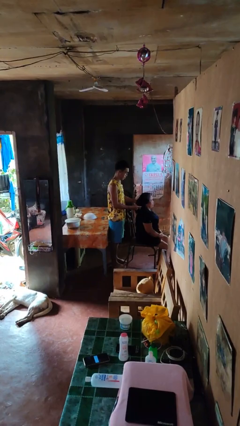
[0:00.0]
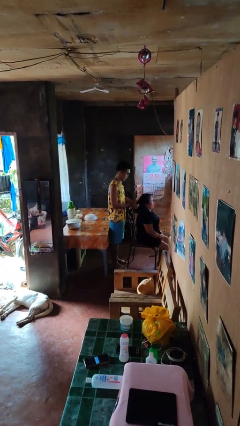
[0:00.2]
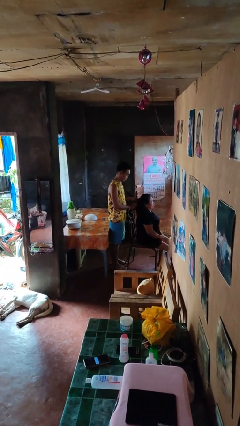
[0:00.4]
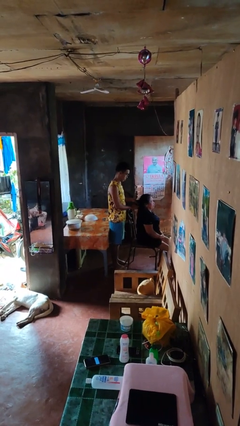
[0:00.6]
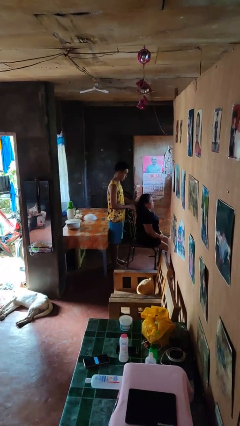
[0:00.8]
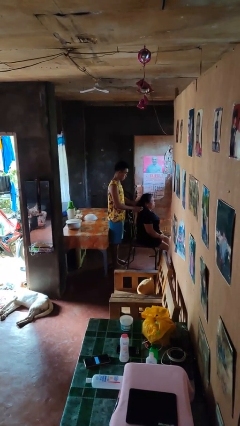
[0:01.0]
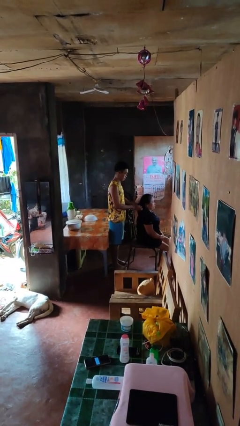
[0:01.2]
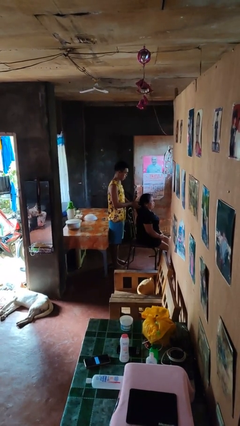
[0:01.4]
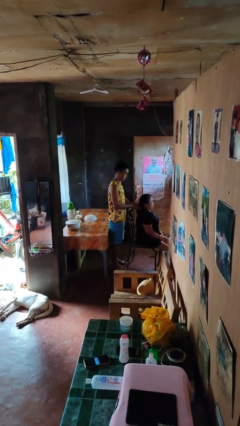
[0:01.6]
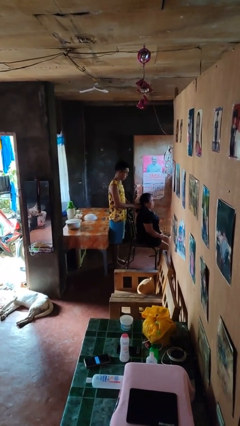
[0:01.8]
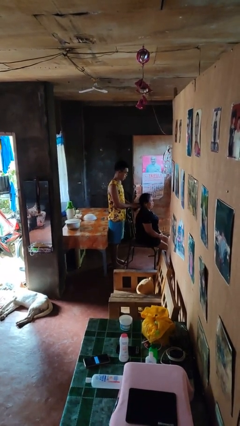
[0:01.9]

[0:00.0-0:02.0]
person braids hair of person

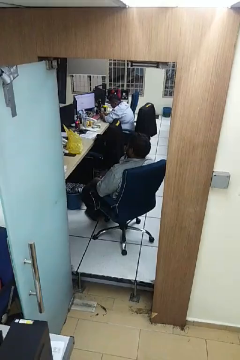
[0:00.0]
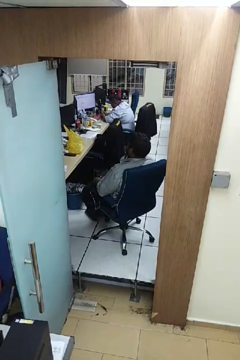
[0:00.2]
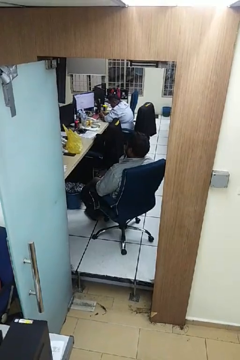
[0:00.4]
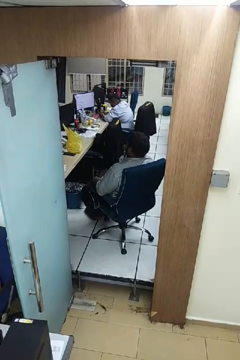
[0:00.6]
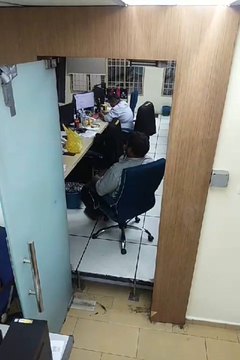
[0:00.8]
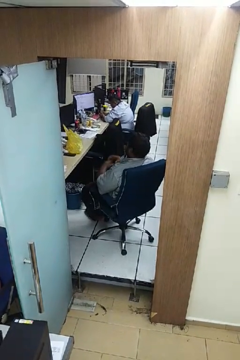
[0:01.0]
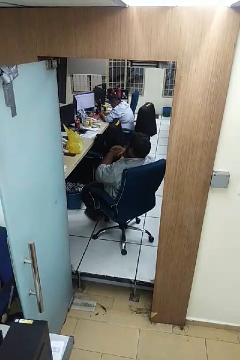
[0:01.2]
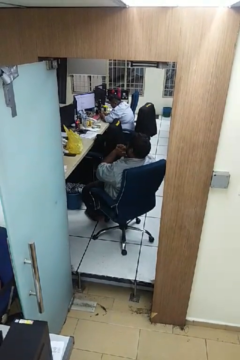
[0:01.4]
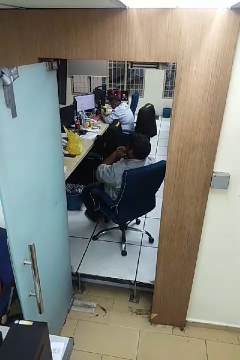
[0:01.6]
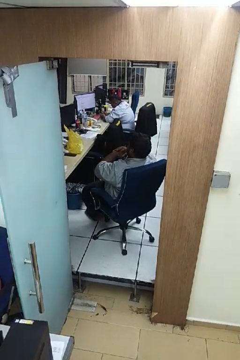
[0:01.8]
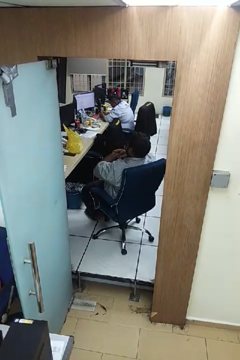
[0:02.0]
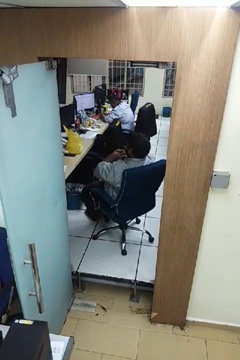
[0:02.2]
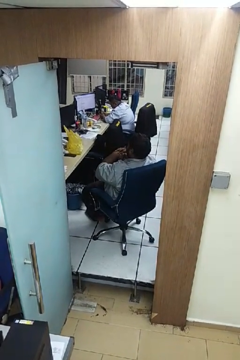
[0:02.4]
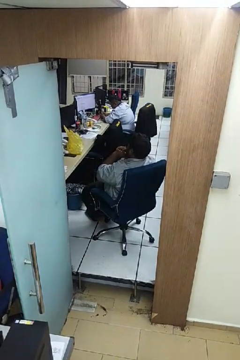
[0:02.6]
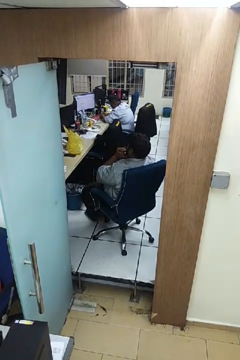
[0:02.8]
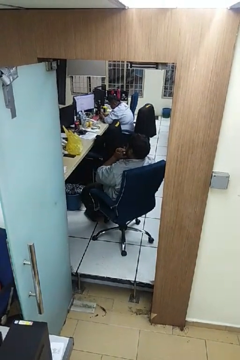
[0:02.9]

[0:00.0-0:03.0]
person cracks knuckles

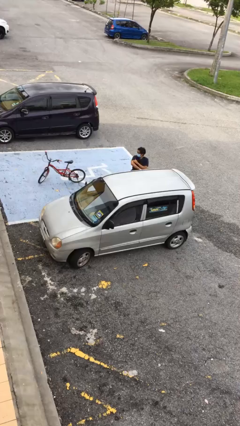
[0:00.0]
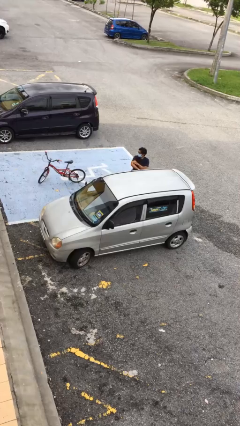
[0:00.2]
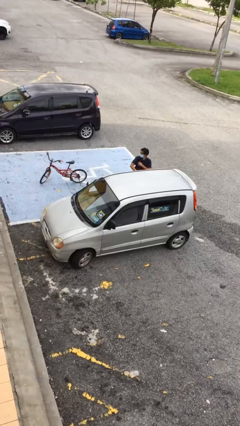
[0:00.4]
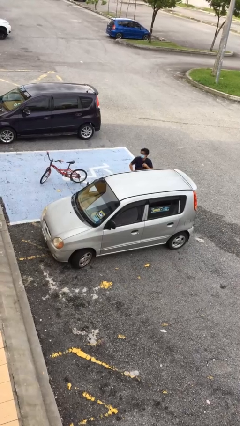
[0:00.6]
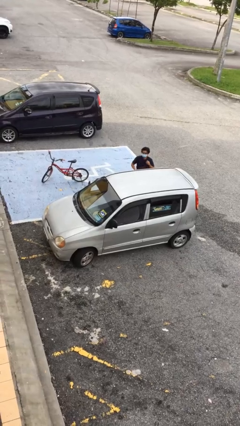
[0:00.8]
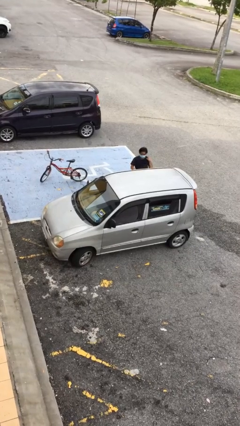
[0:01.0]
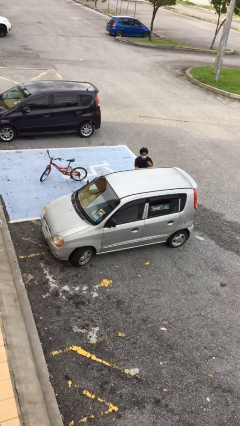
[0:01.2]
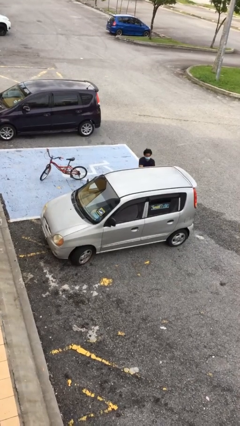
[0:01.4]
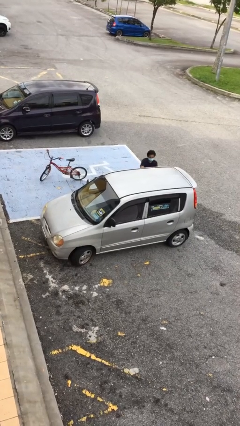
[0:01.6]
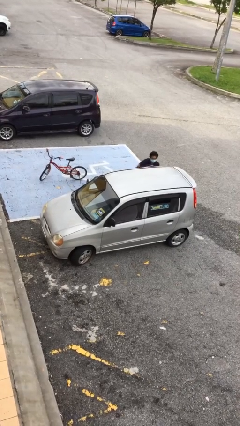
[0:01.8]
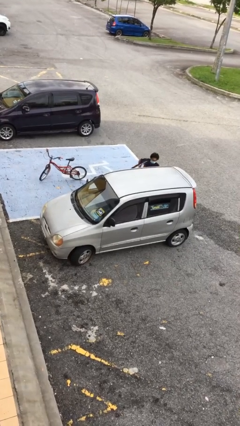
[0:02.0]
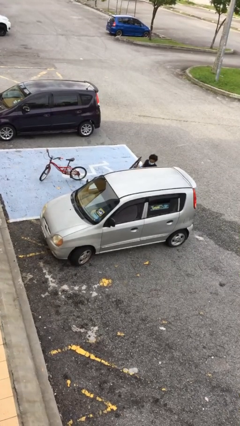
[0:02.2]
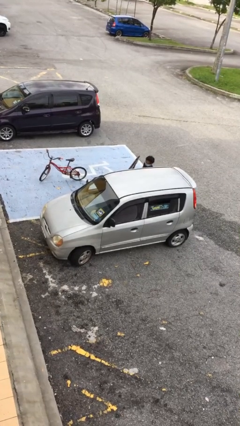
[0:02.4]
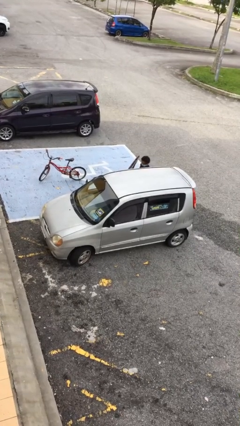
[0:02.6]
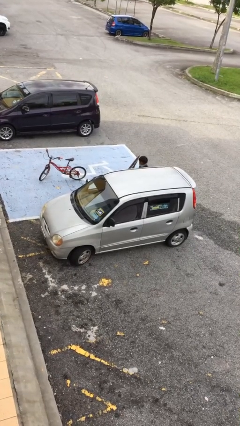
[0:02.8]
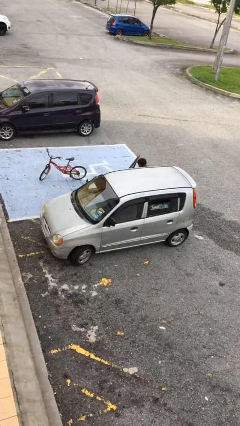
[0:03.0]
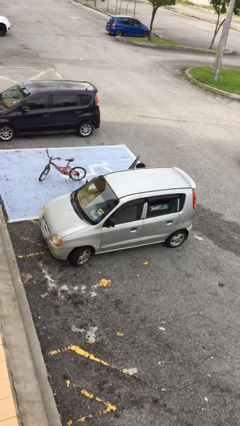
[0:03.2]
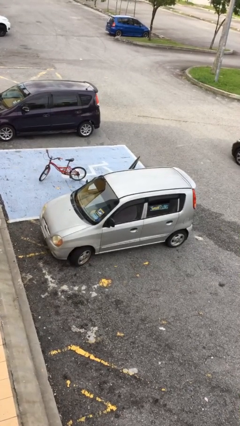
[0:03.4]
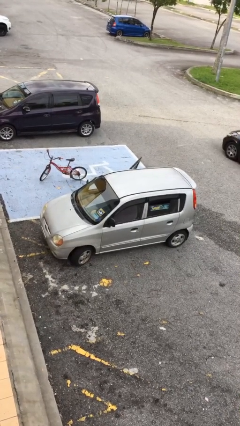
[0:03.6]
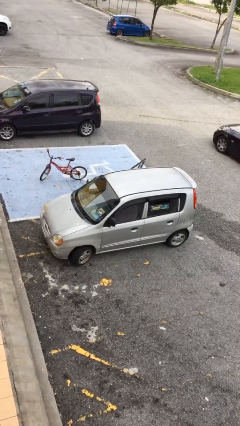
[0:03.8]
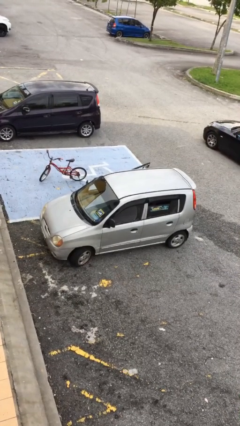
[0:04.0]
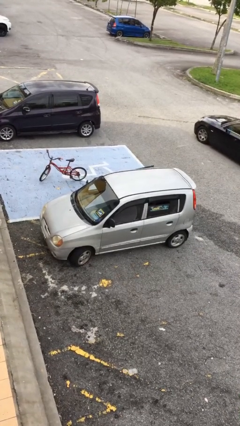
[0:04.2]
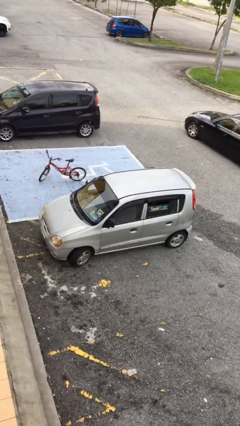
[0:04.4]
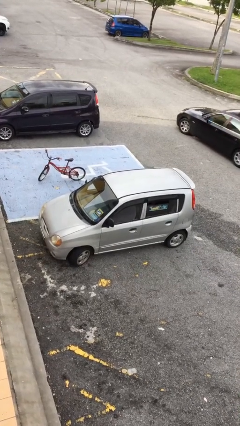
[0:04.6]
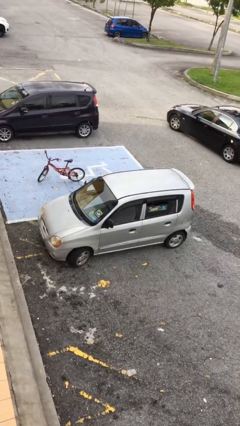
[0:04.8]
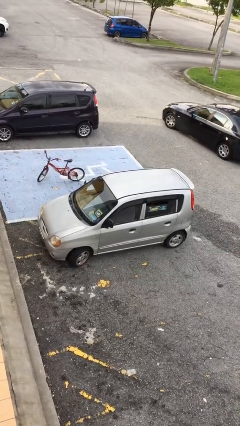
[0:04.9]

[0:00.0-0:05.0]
car picks up person

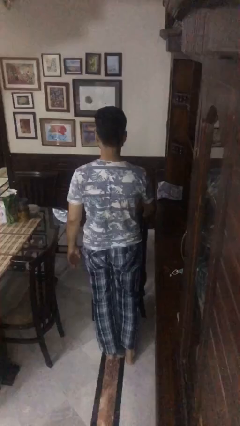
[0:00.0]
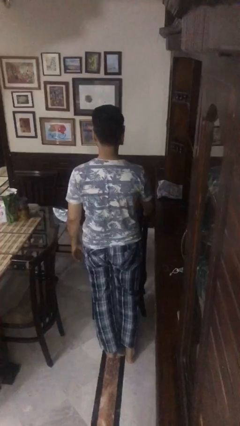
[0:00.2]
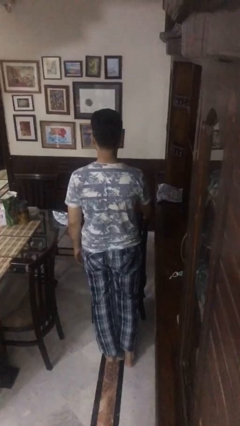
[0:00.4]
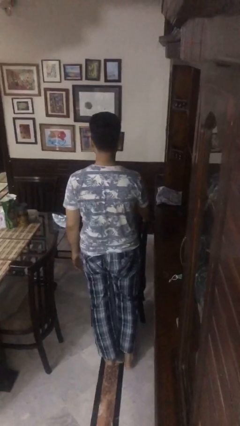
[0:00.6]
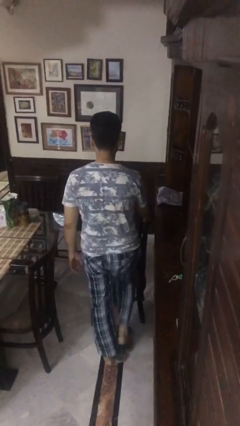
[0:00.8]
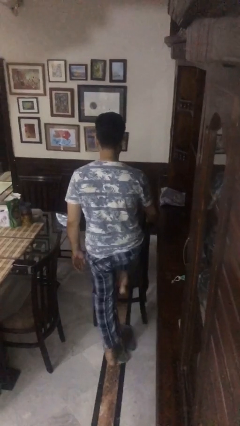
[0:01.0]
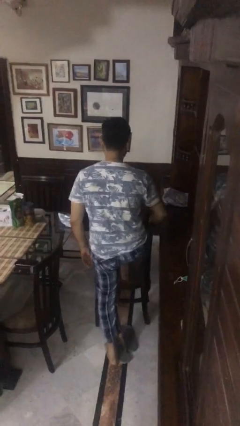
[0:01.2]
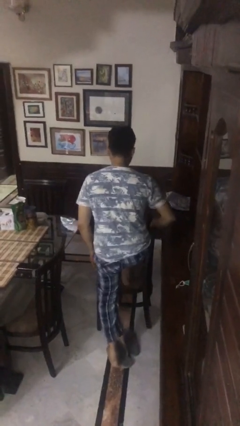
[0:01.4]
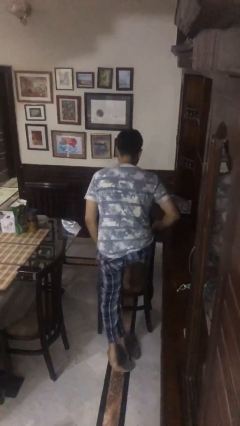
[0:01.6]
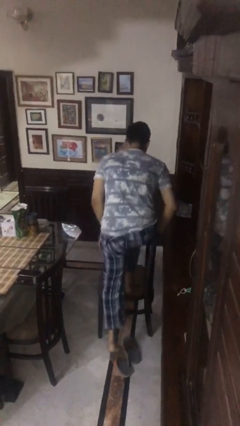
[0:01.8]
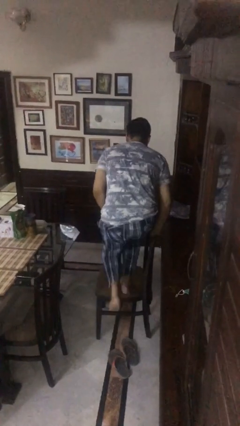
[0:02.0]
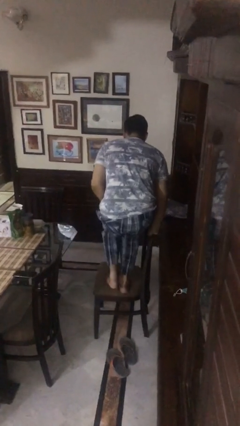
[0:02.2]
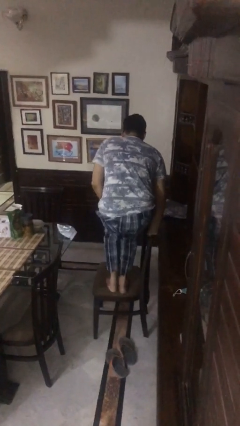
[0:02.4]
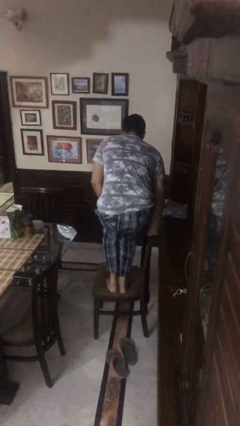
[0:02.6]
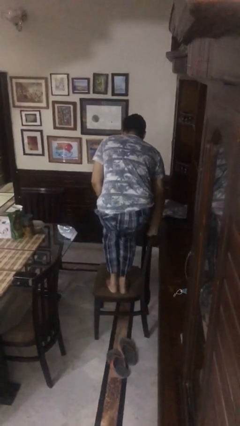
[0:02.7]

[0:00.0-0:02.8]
person climbs on chair

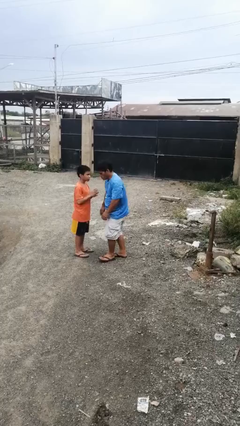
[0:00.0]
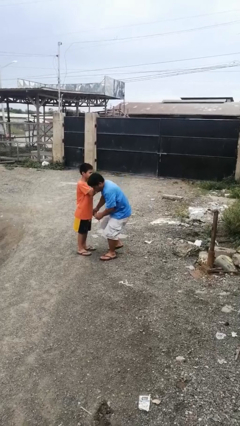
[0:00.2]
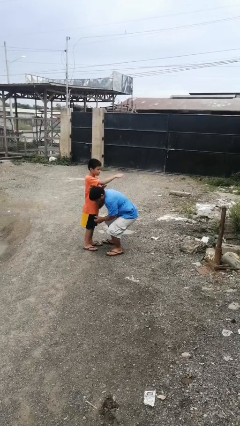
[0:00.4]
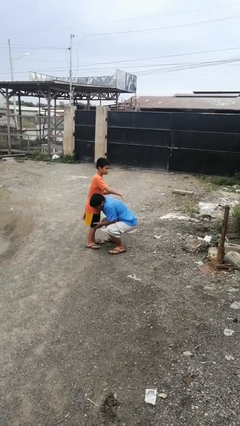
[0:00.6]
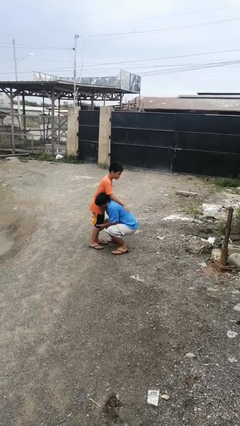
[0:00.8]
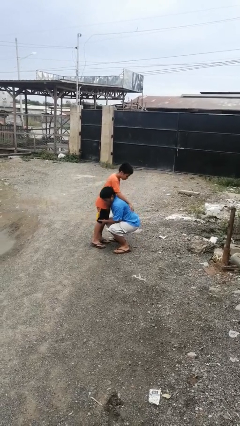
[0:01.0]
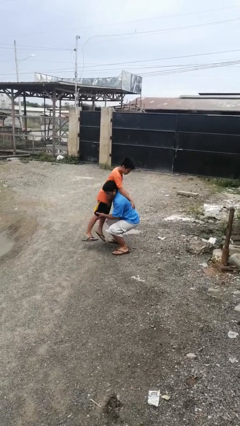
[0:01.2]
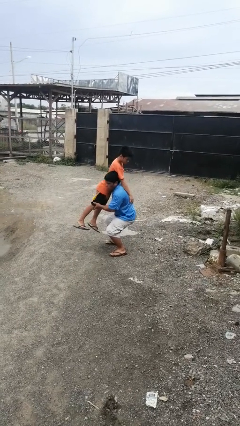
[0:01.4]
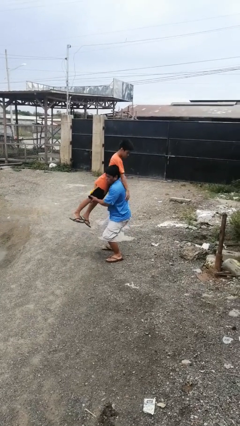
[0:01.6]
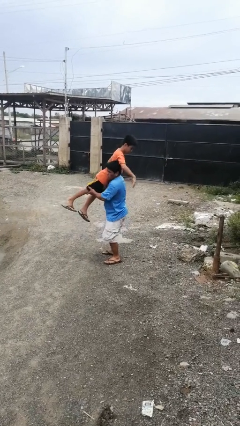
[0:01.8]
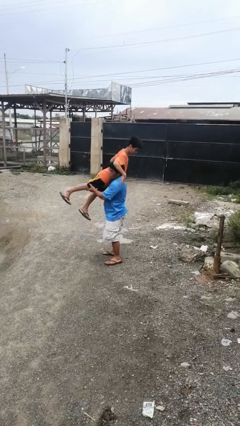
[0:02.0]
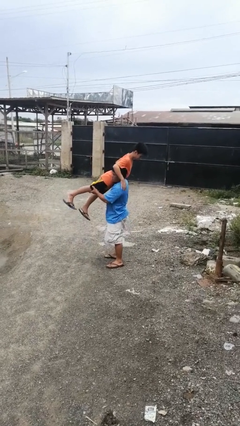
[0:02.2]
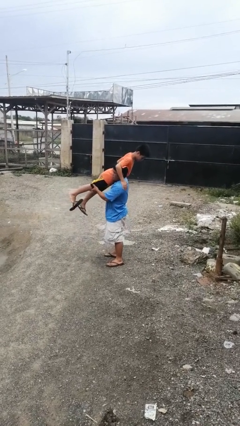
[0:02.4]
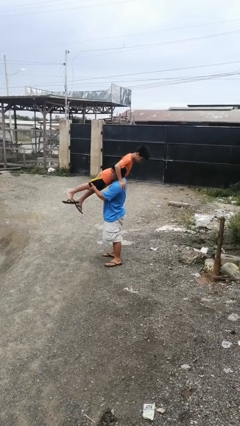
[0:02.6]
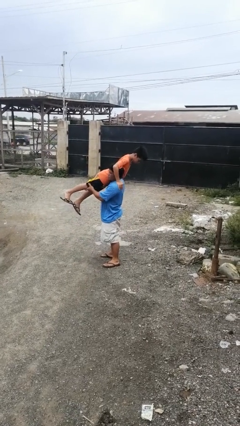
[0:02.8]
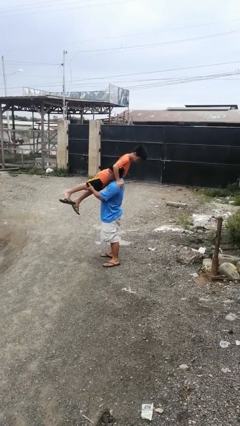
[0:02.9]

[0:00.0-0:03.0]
person carries person over shoulder

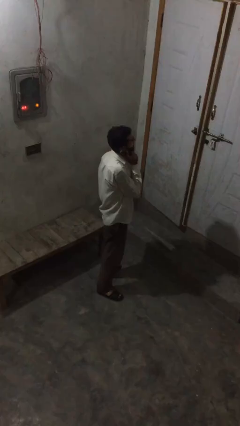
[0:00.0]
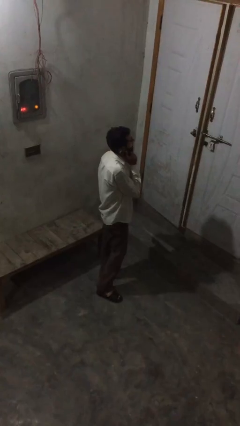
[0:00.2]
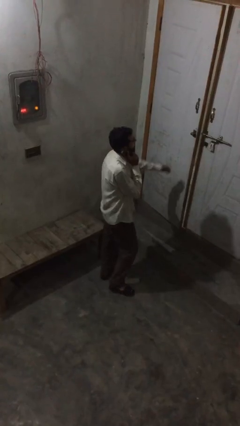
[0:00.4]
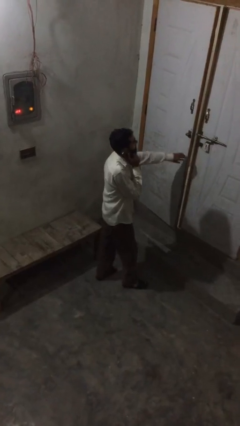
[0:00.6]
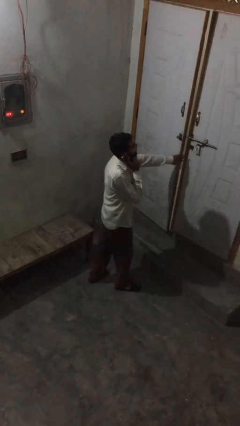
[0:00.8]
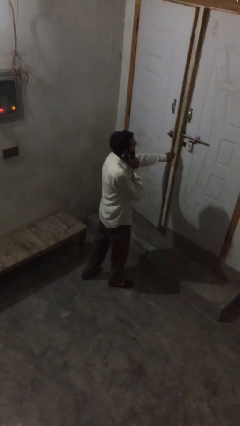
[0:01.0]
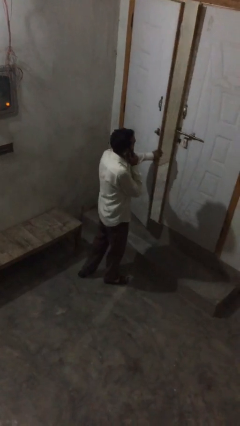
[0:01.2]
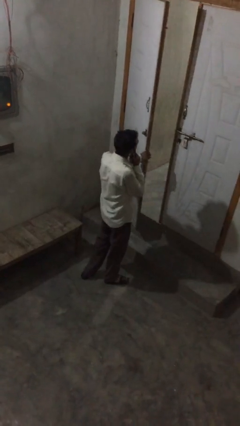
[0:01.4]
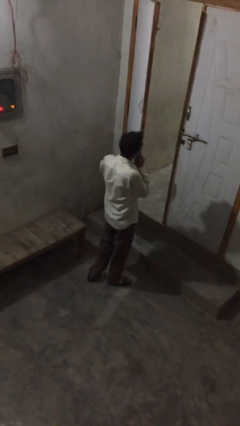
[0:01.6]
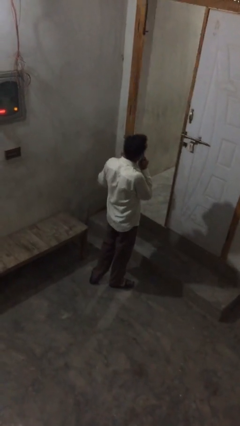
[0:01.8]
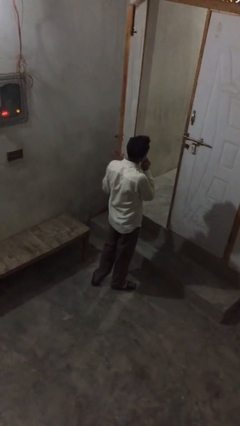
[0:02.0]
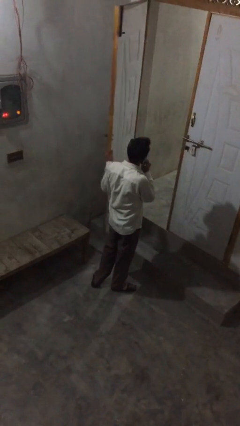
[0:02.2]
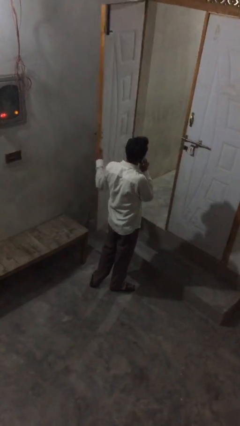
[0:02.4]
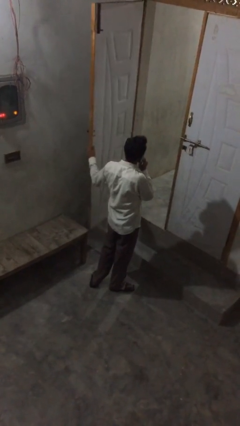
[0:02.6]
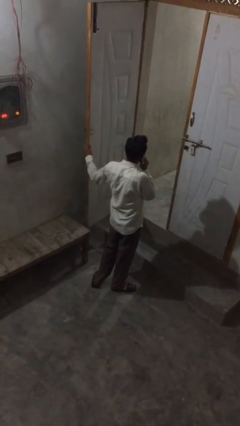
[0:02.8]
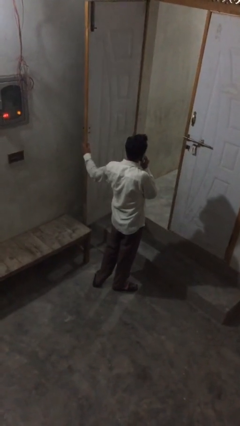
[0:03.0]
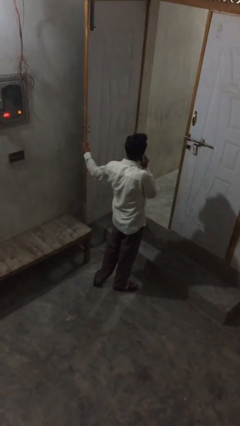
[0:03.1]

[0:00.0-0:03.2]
person opens facility door
